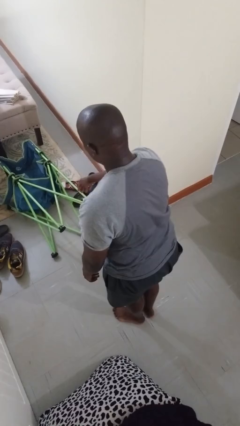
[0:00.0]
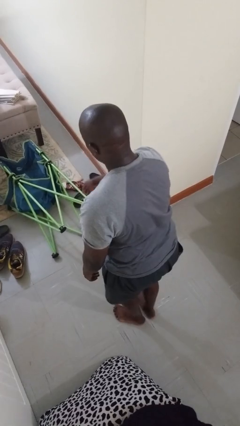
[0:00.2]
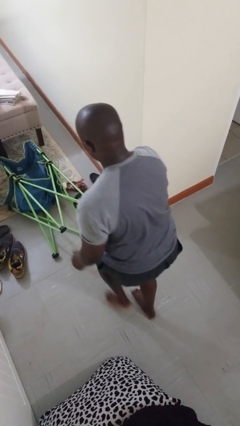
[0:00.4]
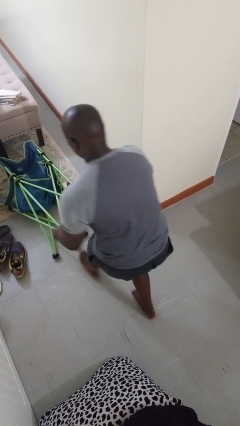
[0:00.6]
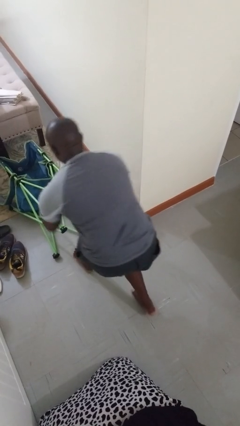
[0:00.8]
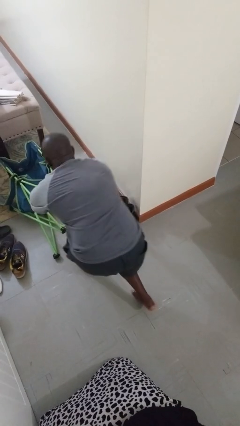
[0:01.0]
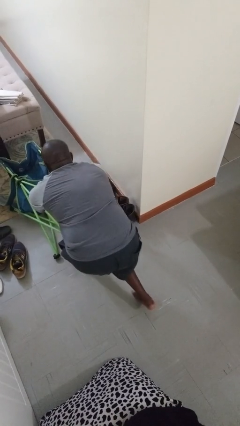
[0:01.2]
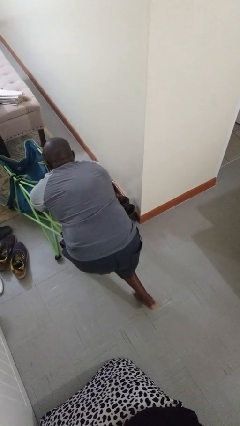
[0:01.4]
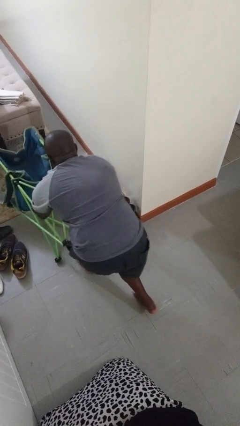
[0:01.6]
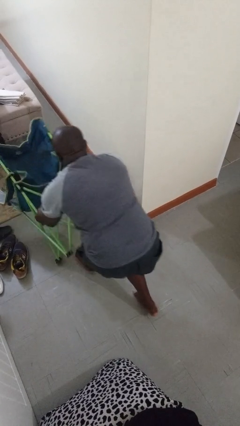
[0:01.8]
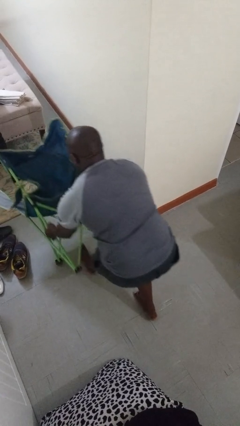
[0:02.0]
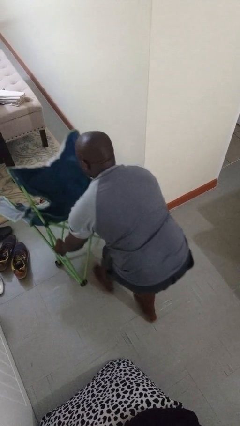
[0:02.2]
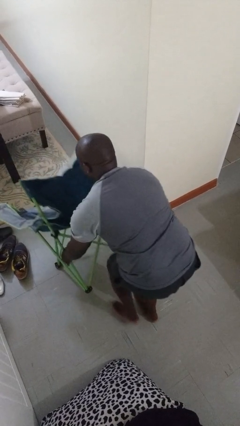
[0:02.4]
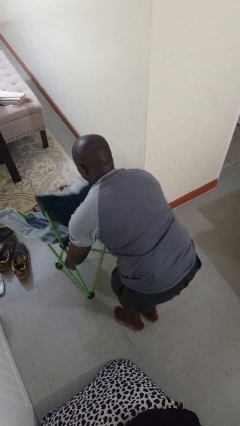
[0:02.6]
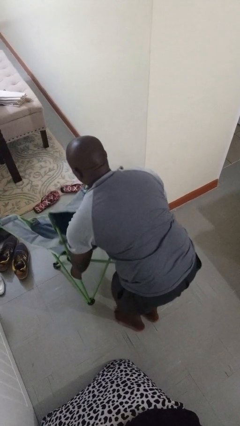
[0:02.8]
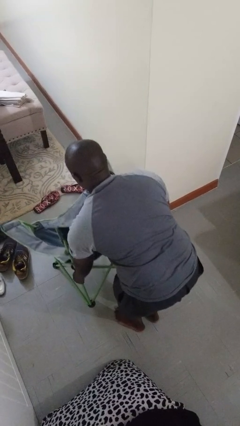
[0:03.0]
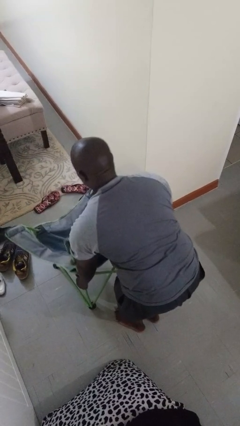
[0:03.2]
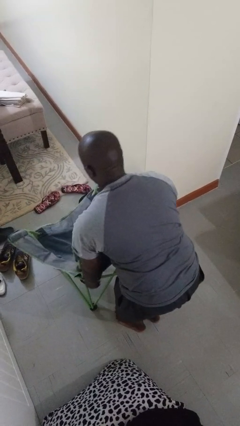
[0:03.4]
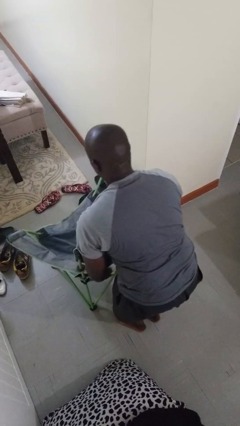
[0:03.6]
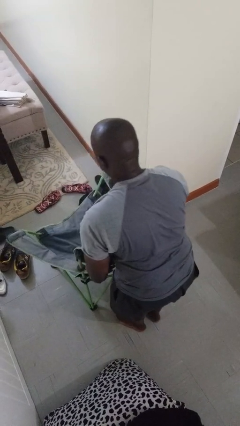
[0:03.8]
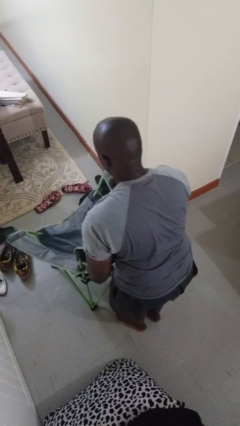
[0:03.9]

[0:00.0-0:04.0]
person sets upright furniture

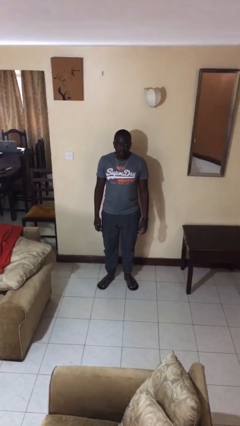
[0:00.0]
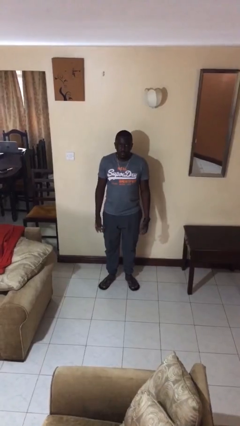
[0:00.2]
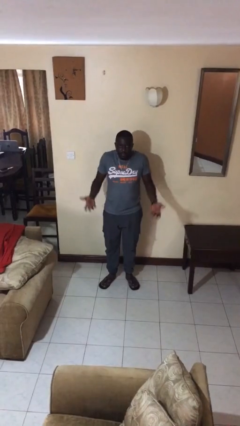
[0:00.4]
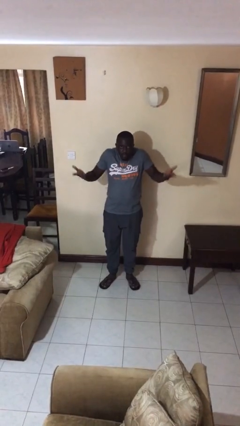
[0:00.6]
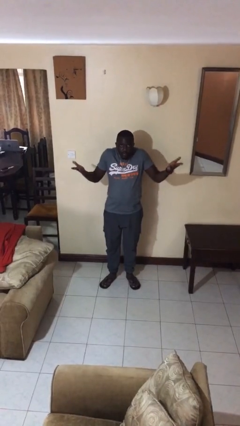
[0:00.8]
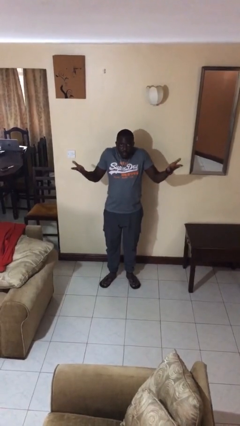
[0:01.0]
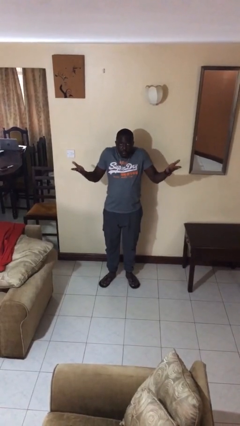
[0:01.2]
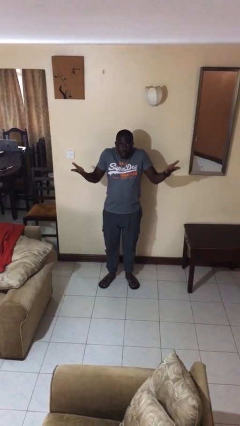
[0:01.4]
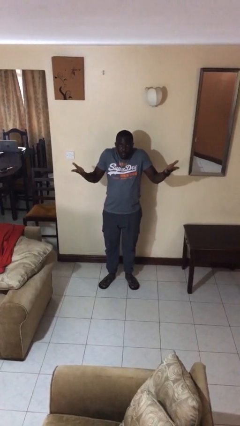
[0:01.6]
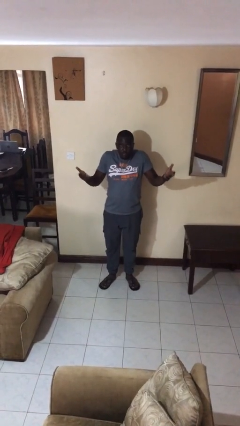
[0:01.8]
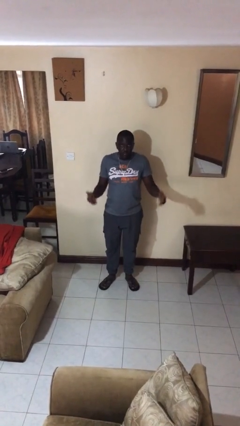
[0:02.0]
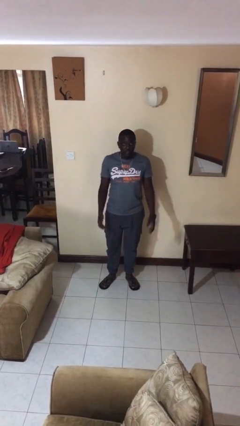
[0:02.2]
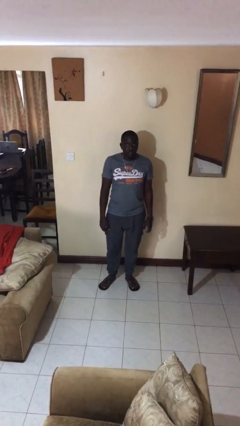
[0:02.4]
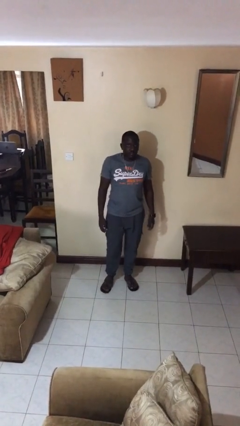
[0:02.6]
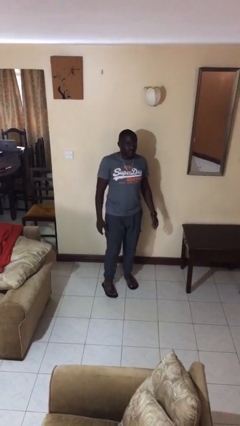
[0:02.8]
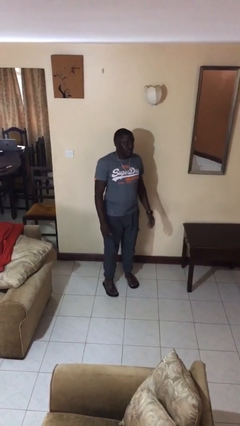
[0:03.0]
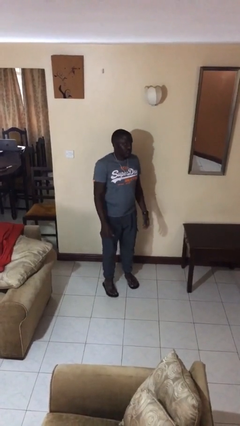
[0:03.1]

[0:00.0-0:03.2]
person shrugs

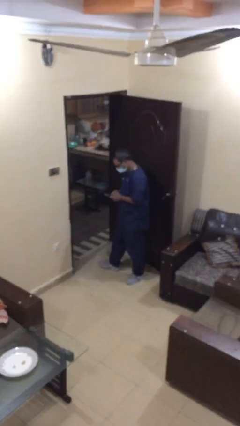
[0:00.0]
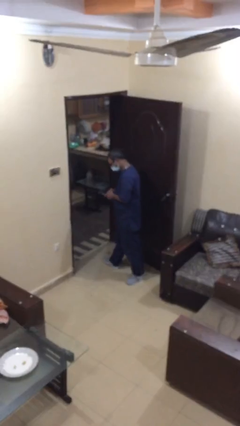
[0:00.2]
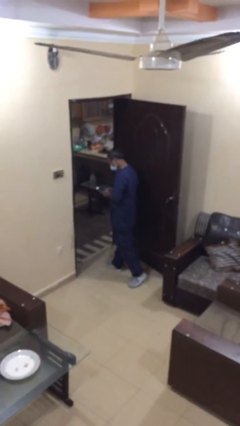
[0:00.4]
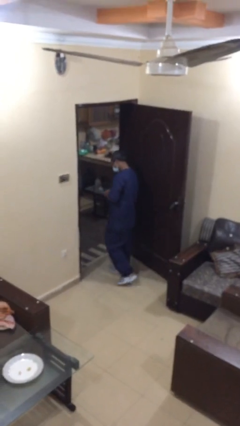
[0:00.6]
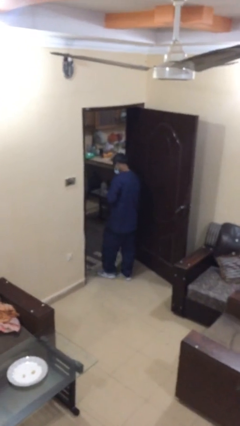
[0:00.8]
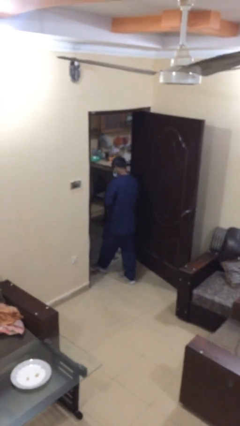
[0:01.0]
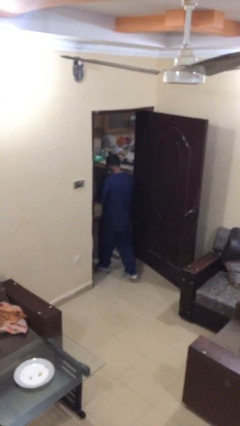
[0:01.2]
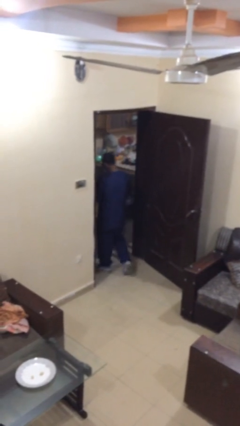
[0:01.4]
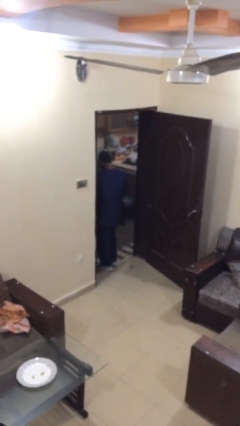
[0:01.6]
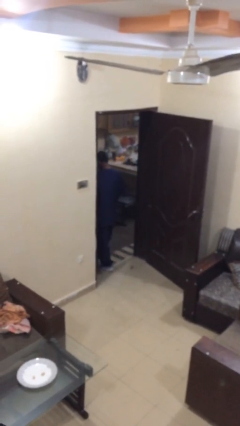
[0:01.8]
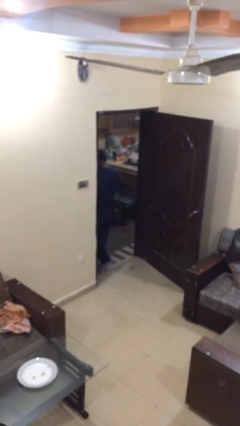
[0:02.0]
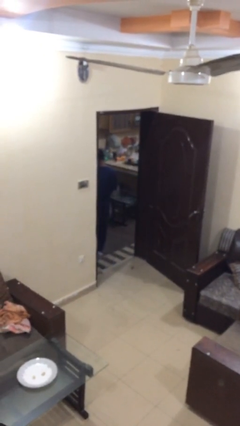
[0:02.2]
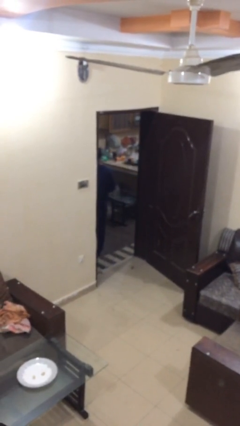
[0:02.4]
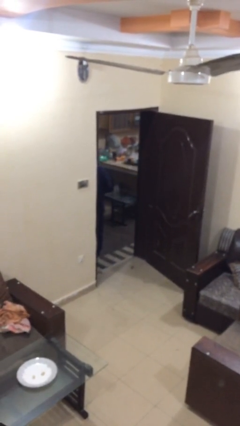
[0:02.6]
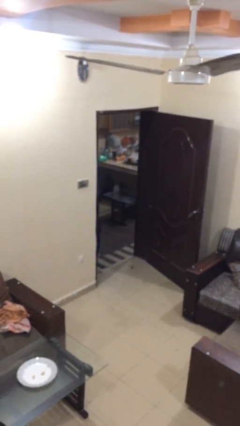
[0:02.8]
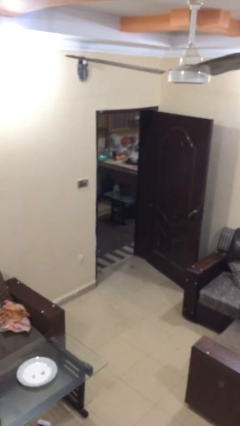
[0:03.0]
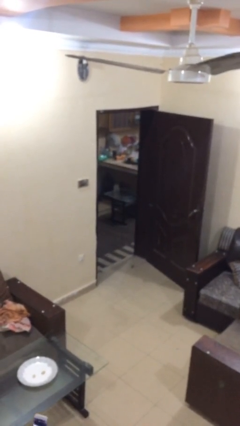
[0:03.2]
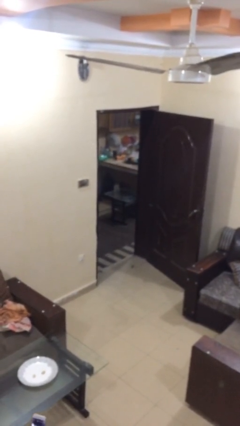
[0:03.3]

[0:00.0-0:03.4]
person exits scene through structure

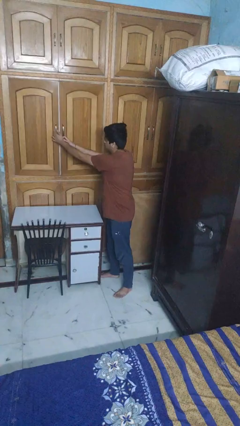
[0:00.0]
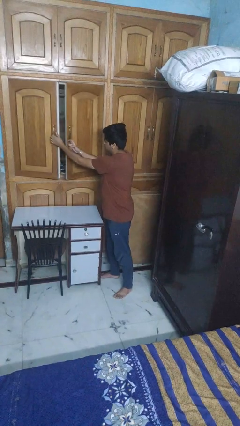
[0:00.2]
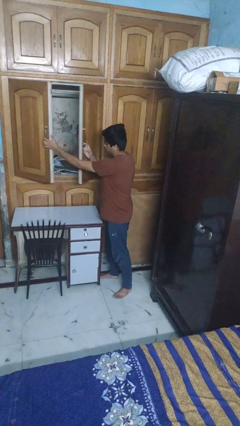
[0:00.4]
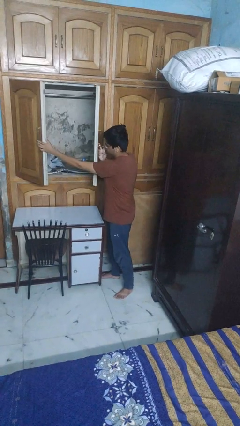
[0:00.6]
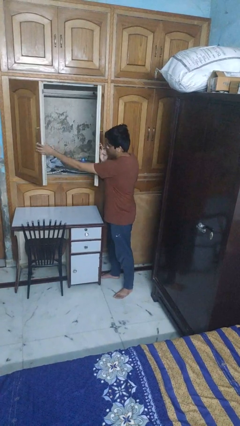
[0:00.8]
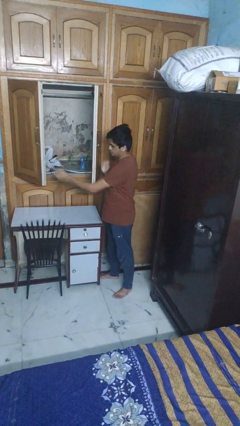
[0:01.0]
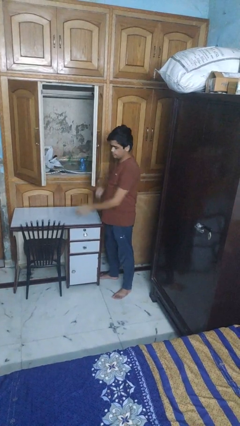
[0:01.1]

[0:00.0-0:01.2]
person opens closet door

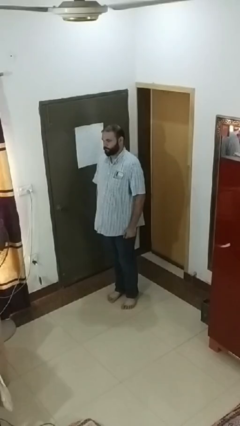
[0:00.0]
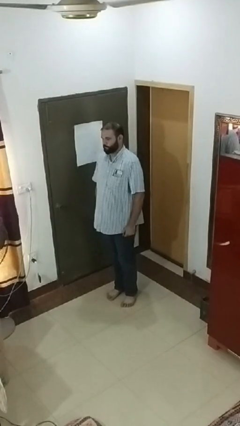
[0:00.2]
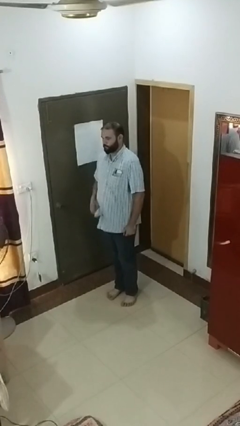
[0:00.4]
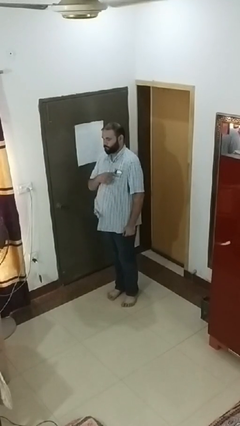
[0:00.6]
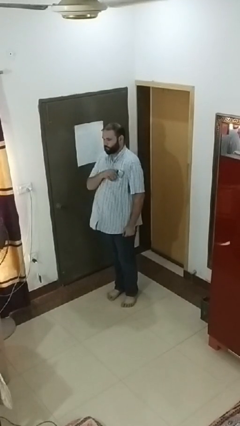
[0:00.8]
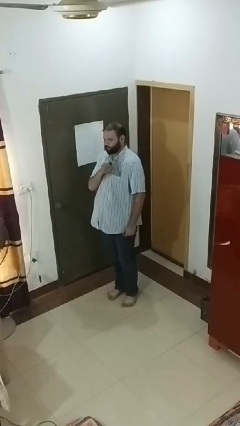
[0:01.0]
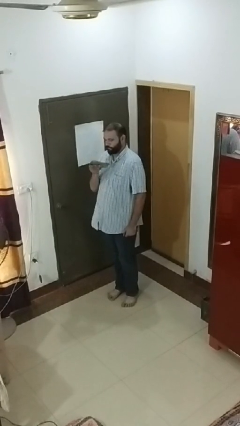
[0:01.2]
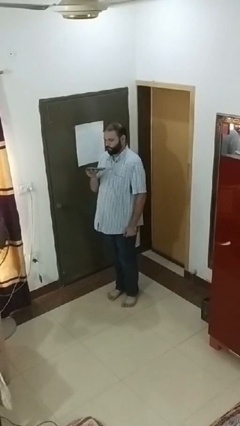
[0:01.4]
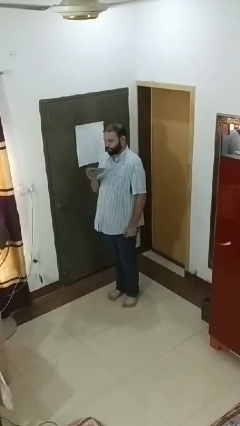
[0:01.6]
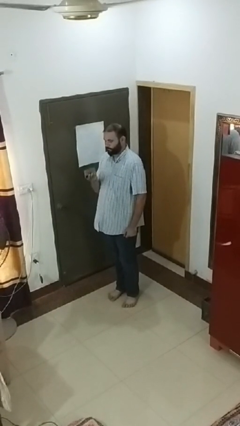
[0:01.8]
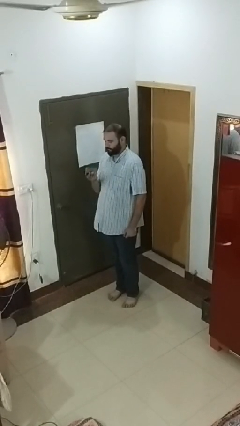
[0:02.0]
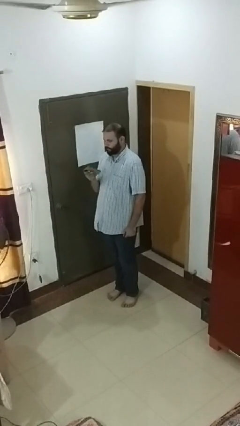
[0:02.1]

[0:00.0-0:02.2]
person takes phone from pocket

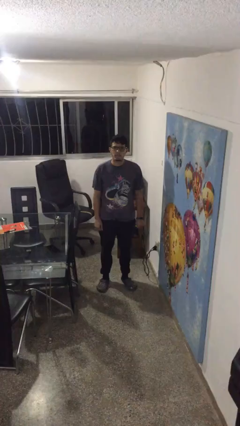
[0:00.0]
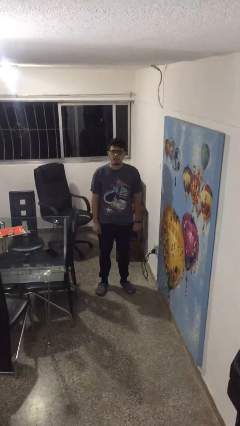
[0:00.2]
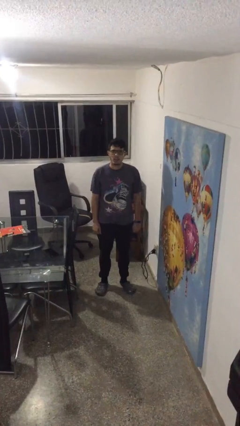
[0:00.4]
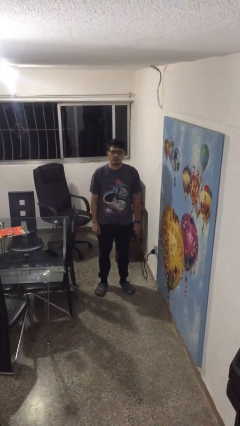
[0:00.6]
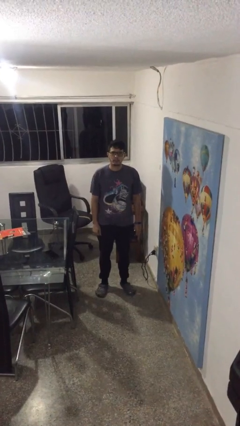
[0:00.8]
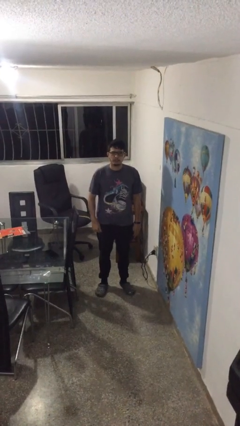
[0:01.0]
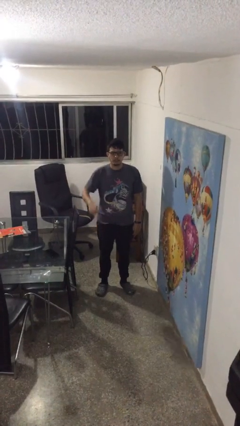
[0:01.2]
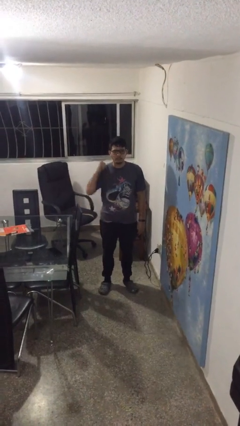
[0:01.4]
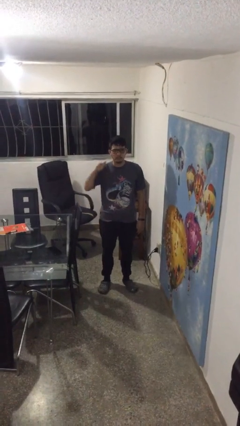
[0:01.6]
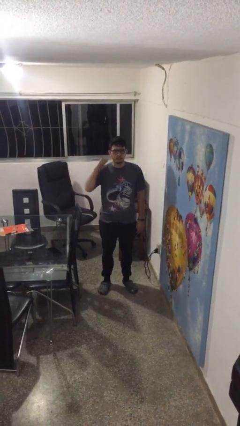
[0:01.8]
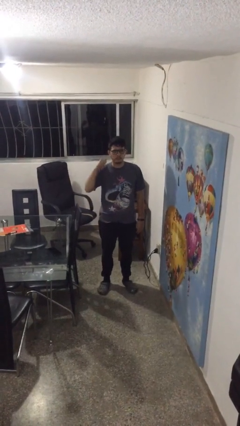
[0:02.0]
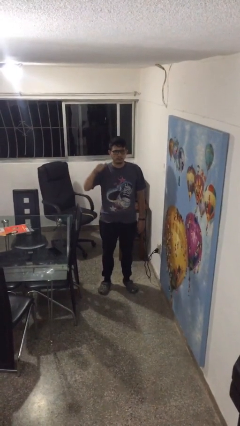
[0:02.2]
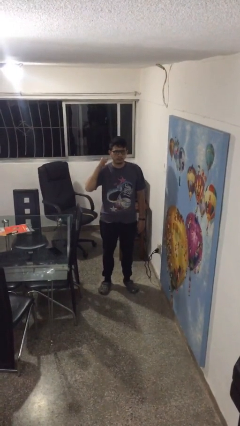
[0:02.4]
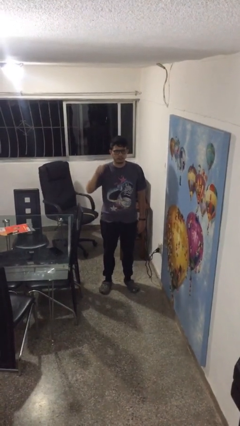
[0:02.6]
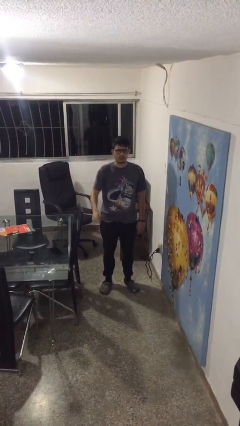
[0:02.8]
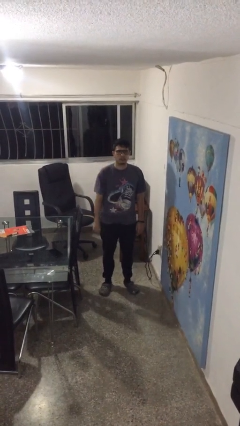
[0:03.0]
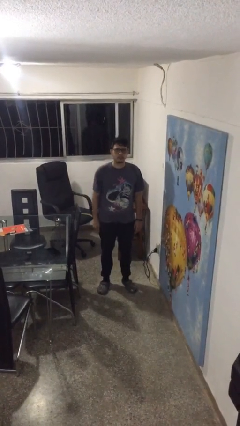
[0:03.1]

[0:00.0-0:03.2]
person gestures behind me

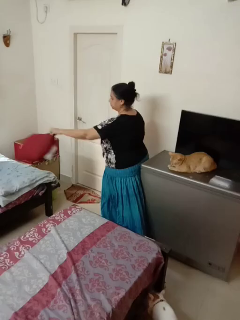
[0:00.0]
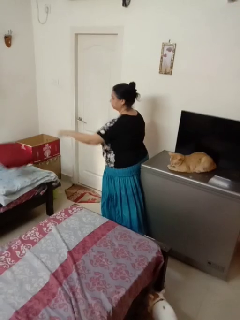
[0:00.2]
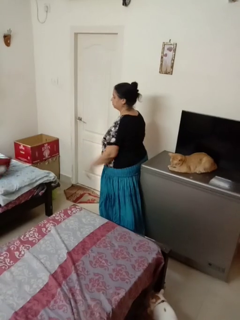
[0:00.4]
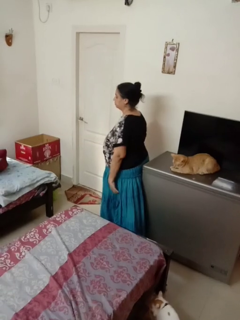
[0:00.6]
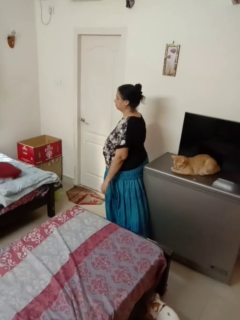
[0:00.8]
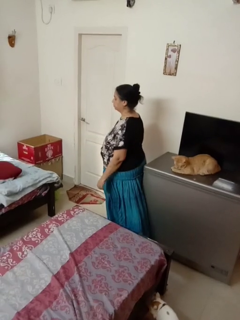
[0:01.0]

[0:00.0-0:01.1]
person throws object on bed
